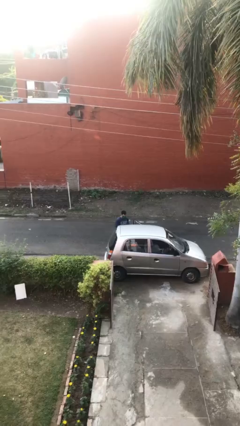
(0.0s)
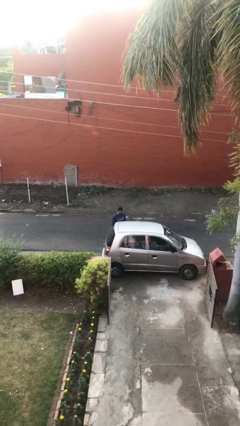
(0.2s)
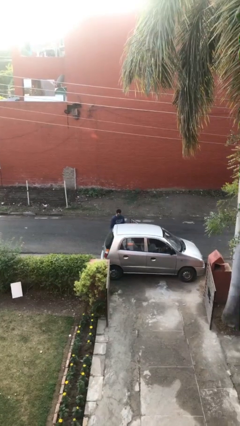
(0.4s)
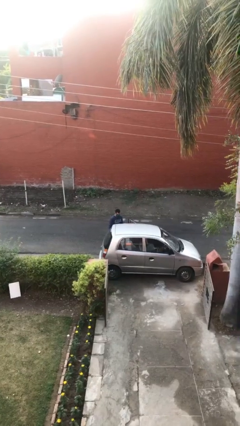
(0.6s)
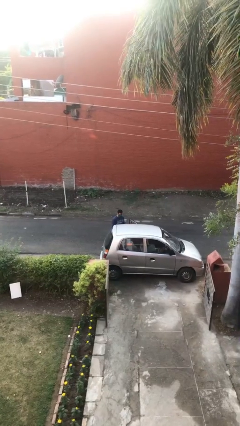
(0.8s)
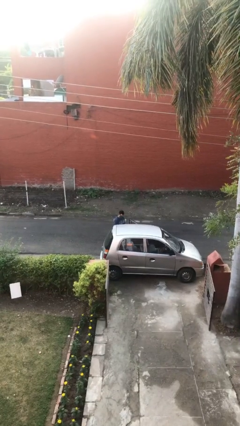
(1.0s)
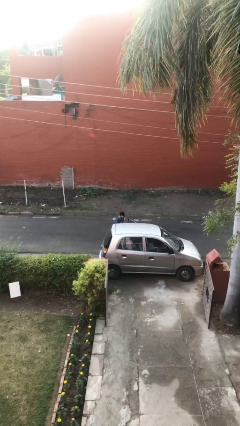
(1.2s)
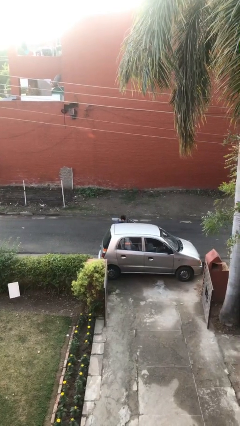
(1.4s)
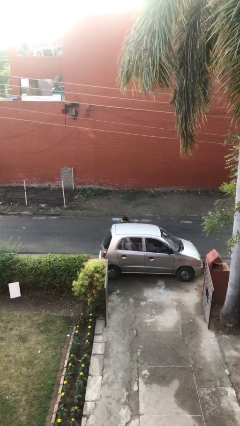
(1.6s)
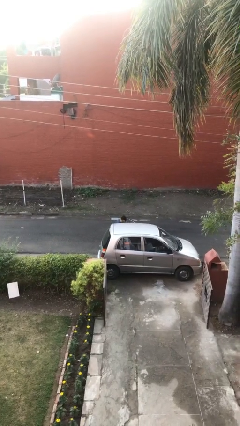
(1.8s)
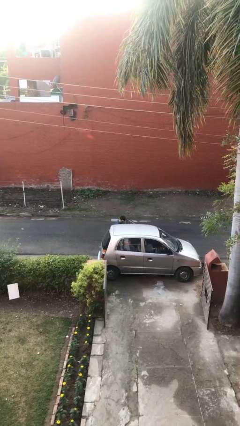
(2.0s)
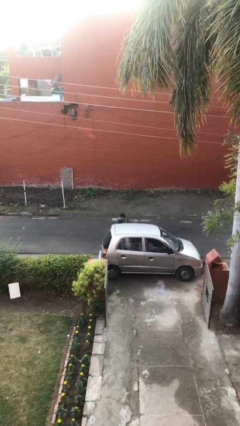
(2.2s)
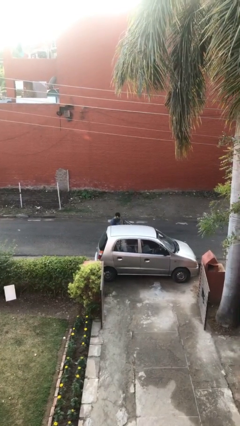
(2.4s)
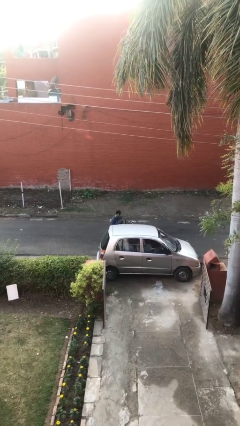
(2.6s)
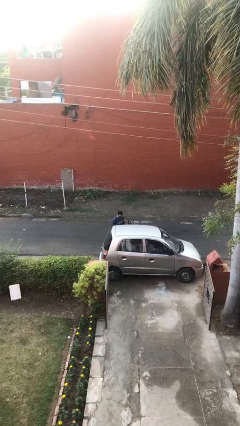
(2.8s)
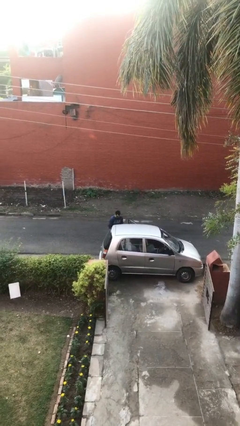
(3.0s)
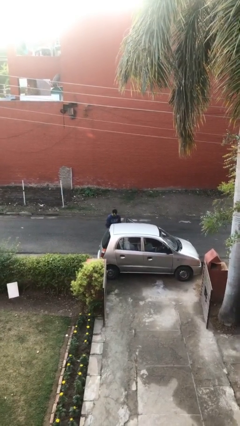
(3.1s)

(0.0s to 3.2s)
person unloads car

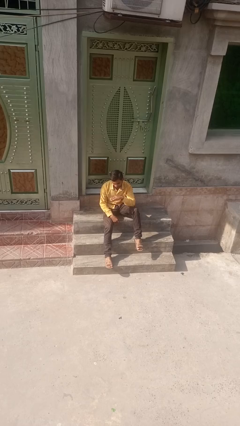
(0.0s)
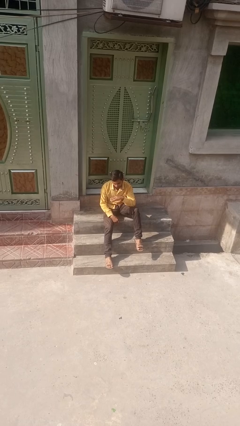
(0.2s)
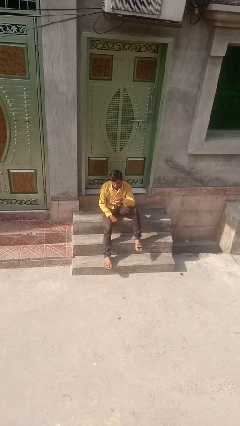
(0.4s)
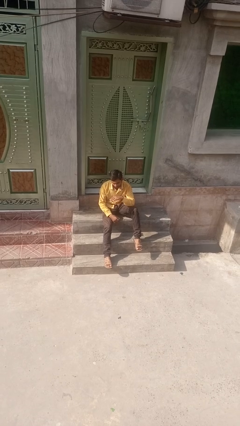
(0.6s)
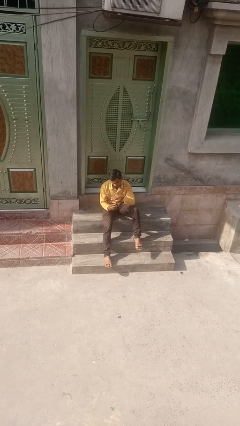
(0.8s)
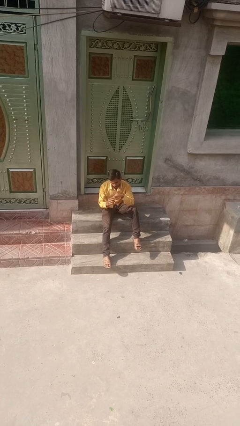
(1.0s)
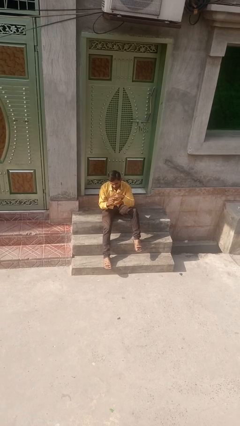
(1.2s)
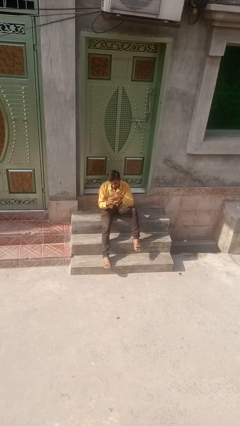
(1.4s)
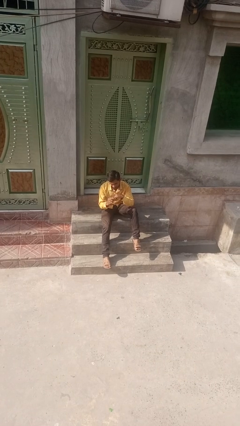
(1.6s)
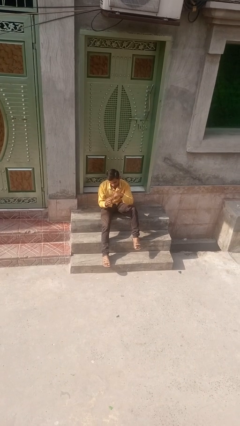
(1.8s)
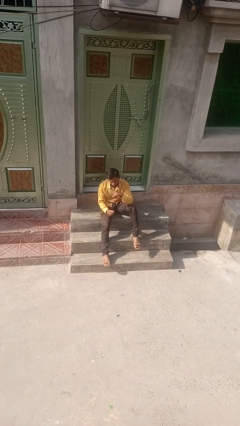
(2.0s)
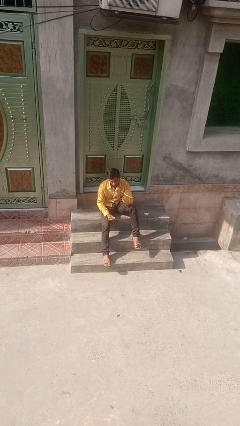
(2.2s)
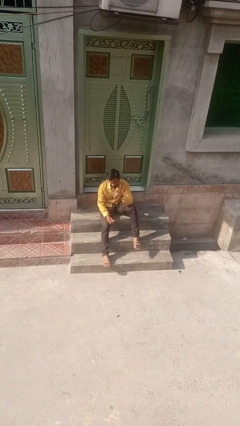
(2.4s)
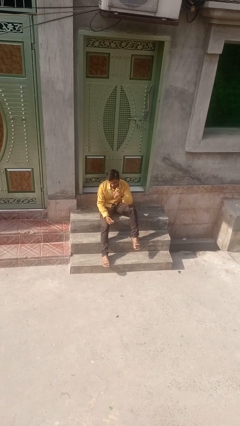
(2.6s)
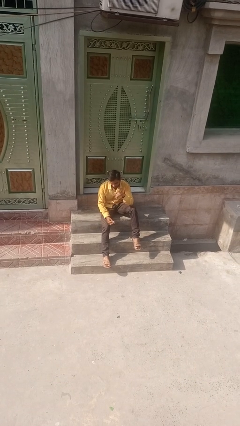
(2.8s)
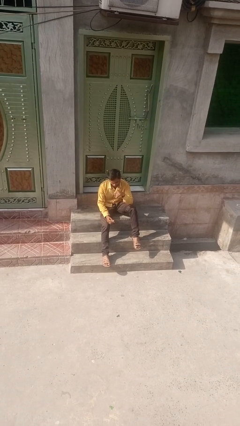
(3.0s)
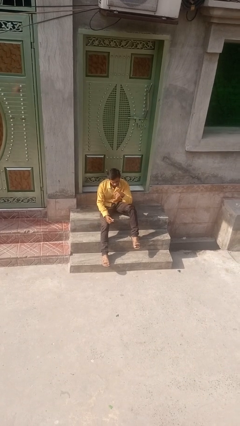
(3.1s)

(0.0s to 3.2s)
person takes off ring

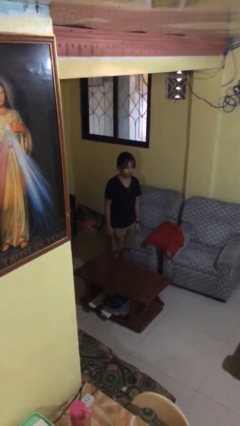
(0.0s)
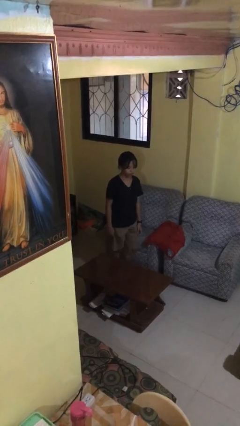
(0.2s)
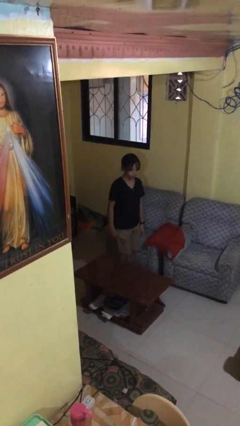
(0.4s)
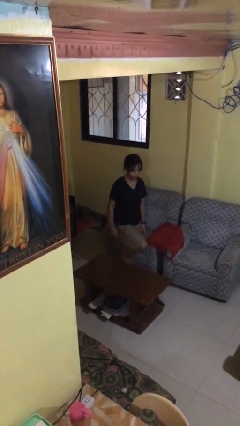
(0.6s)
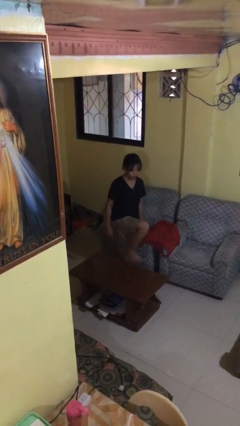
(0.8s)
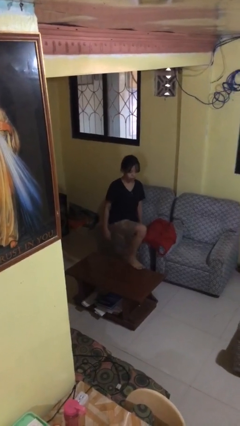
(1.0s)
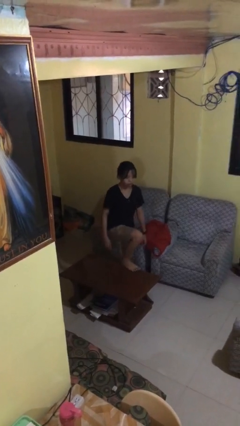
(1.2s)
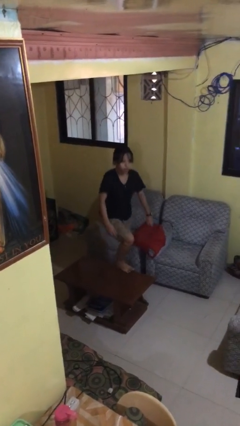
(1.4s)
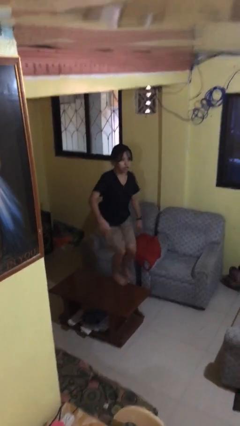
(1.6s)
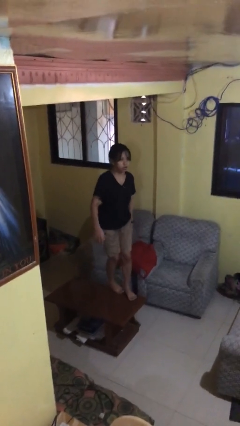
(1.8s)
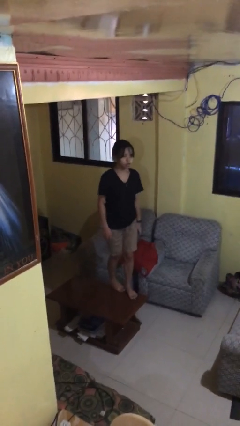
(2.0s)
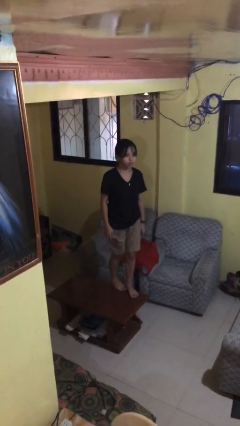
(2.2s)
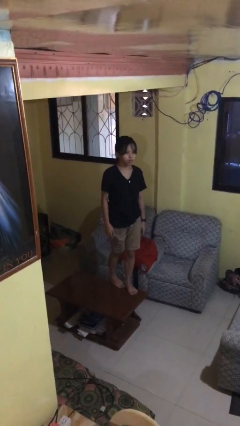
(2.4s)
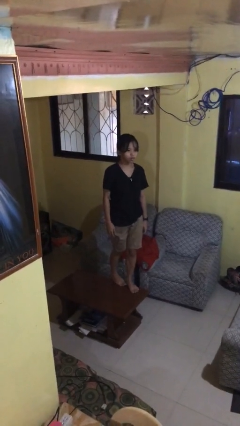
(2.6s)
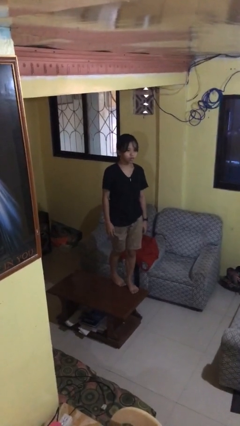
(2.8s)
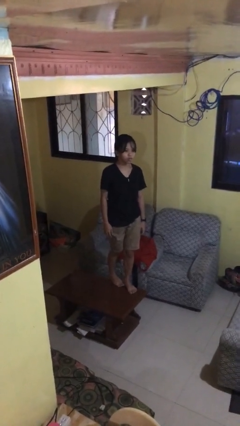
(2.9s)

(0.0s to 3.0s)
person climbs on table

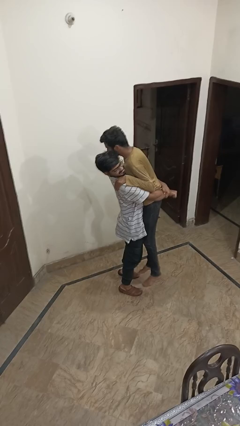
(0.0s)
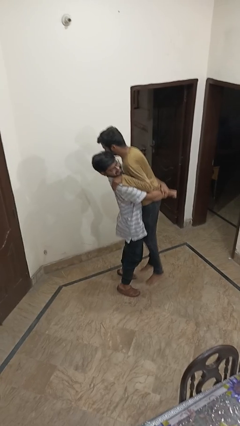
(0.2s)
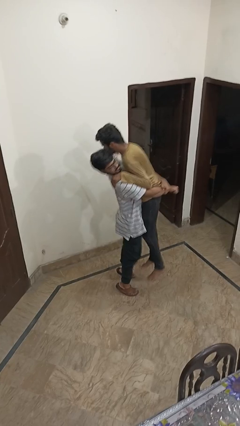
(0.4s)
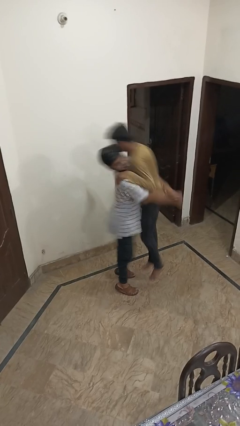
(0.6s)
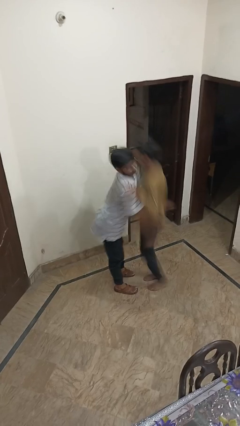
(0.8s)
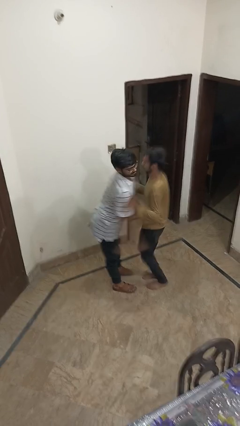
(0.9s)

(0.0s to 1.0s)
person puts down person

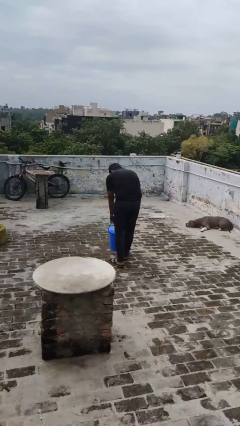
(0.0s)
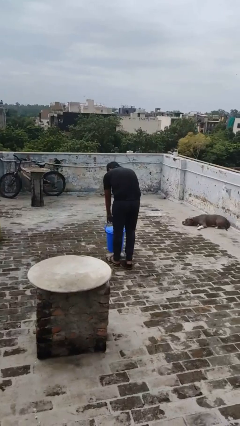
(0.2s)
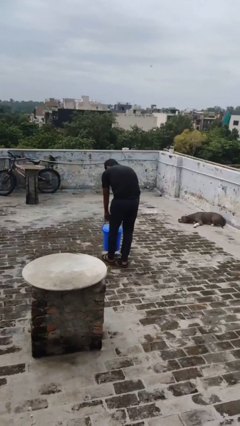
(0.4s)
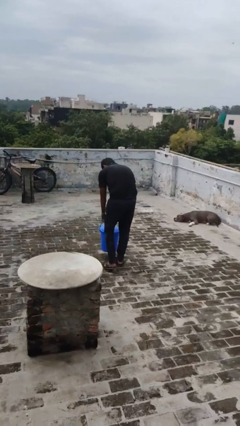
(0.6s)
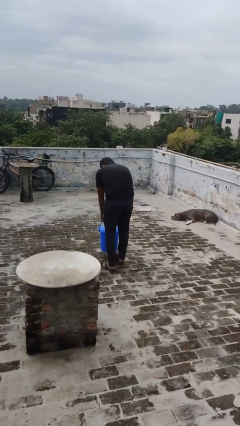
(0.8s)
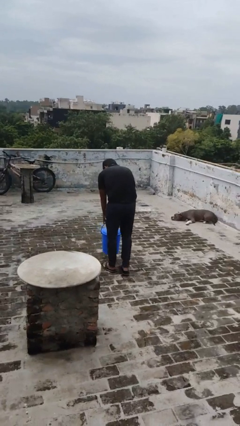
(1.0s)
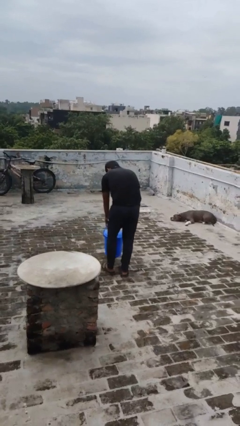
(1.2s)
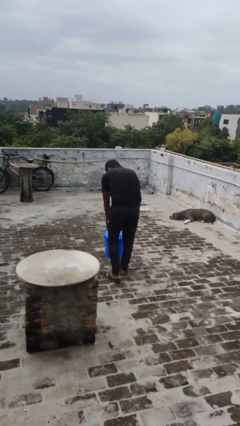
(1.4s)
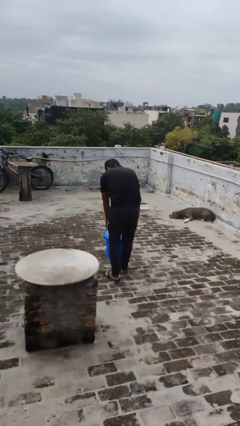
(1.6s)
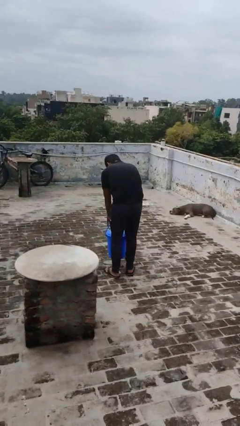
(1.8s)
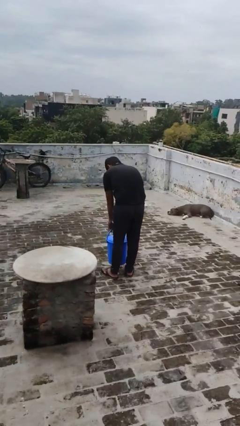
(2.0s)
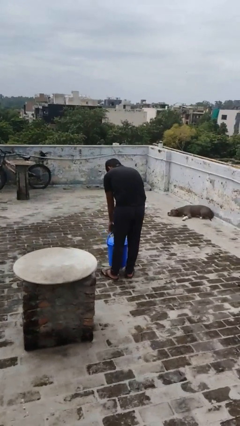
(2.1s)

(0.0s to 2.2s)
person pulls wheeled trashcan

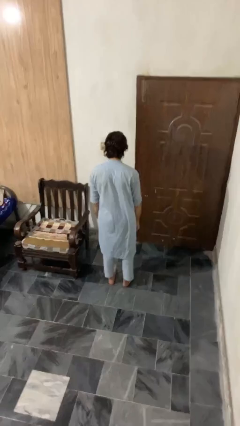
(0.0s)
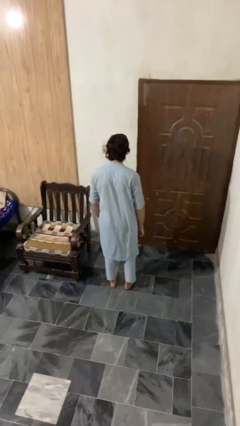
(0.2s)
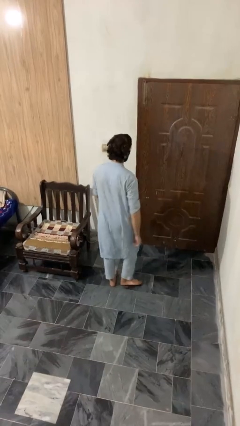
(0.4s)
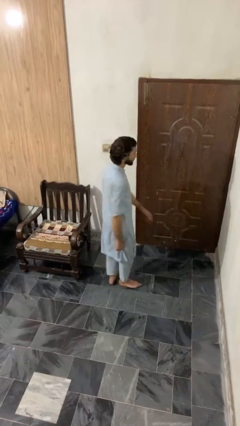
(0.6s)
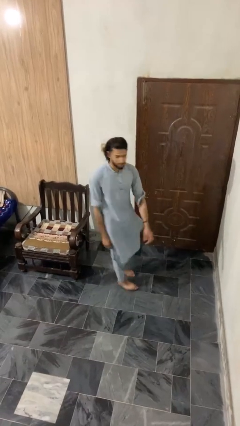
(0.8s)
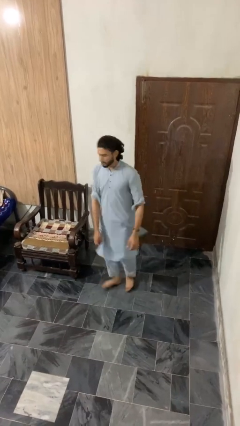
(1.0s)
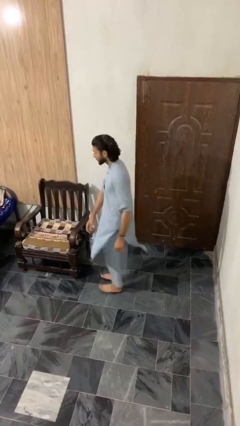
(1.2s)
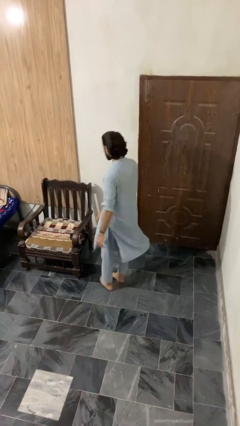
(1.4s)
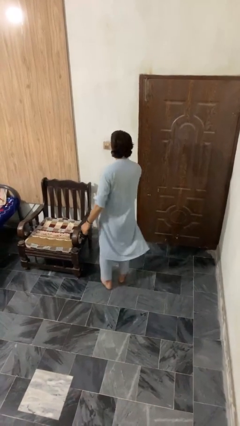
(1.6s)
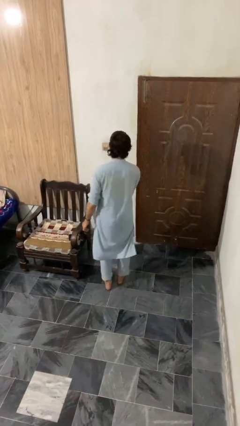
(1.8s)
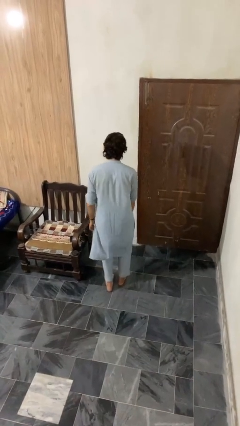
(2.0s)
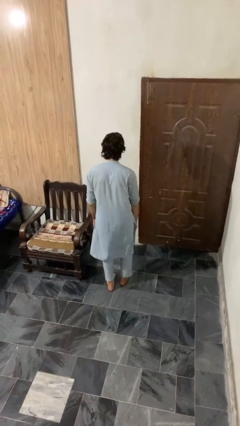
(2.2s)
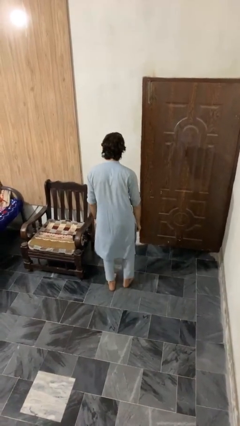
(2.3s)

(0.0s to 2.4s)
person twirls

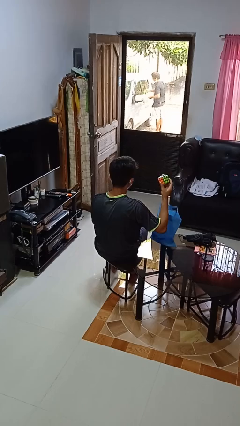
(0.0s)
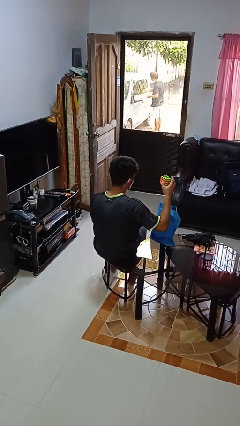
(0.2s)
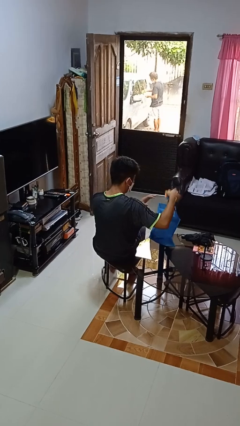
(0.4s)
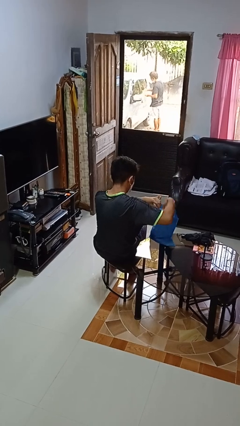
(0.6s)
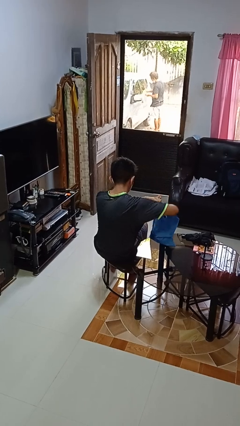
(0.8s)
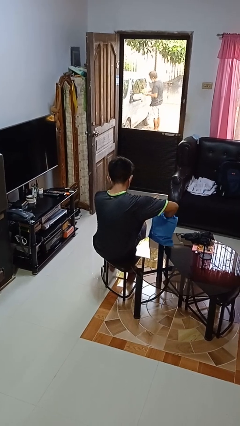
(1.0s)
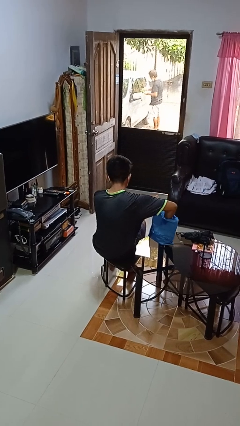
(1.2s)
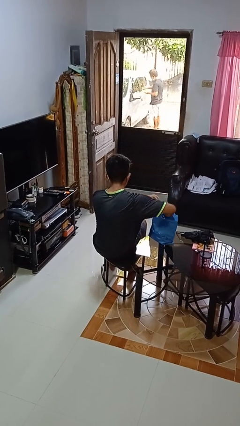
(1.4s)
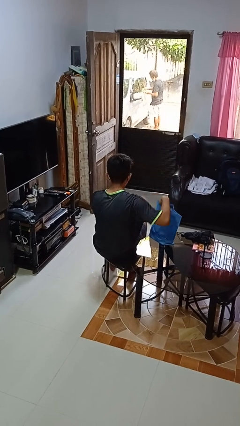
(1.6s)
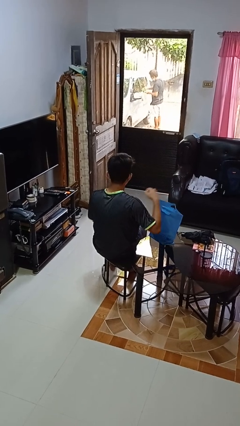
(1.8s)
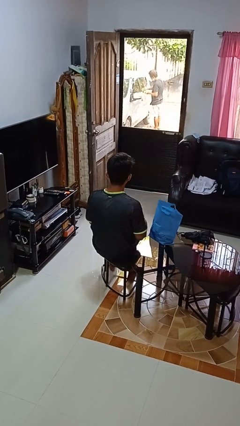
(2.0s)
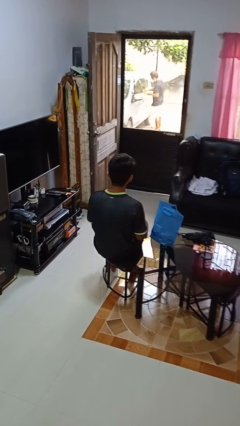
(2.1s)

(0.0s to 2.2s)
person puts object into bag
